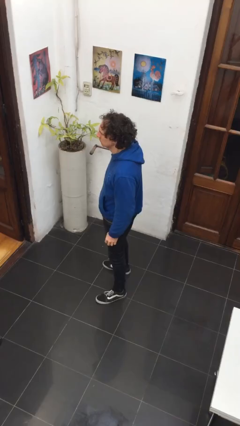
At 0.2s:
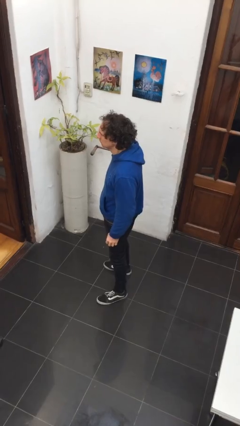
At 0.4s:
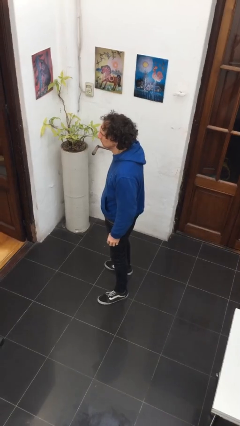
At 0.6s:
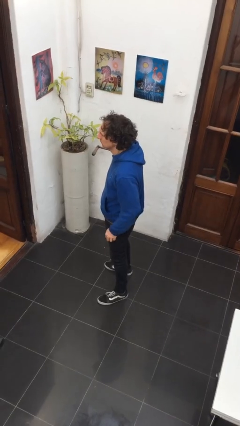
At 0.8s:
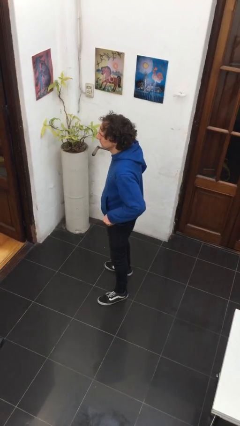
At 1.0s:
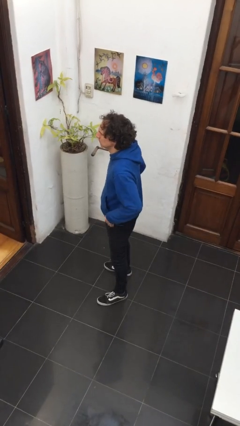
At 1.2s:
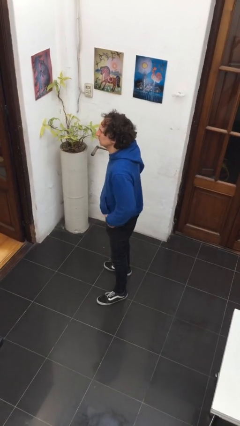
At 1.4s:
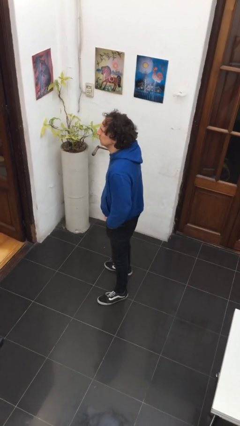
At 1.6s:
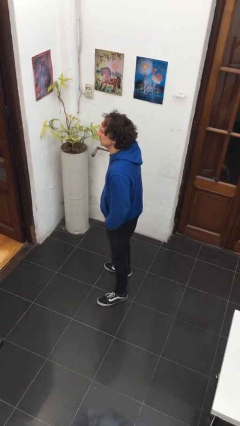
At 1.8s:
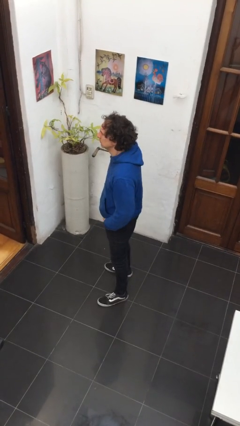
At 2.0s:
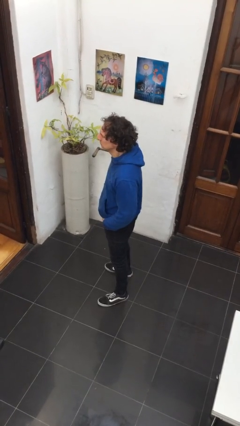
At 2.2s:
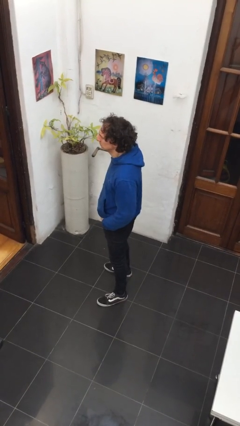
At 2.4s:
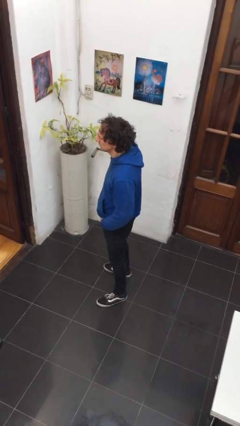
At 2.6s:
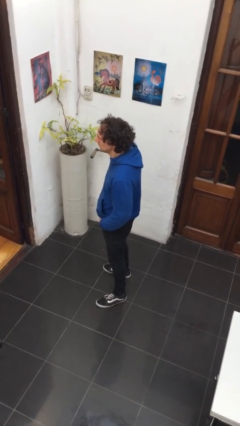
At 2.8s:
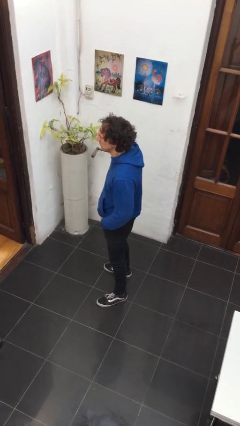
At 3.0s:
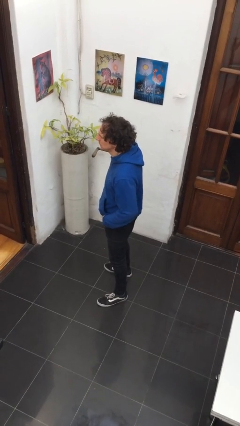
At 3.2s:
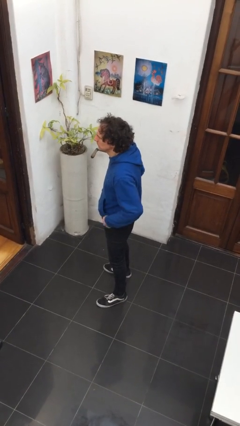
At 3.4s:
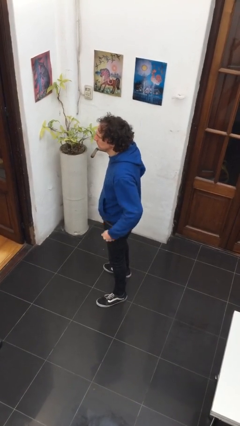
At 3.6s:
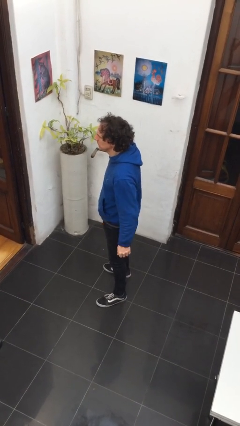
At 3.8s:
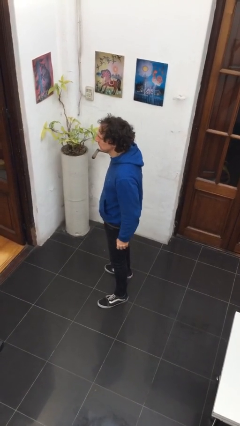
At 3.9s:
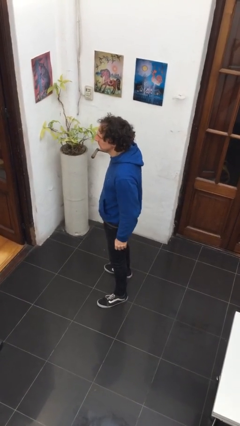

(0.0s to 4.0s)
person puts hands in back pockets

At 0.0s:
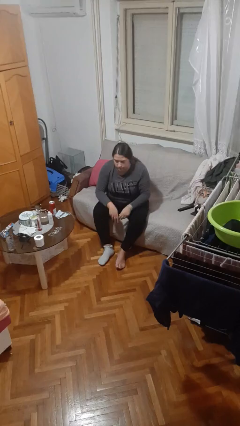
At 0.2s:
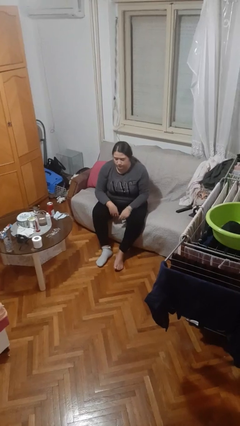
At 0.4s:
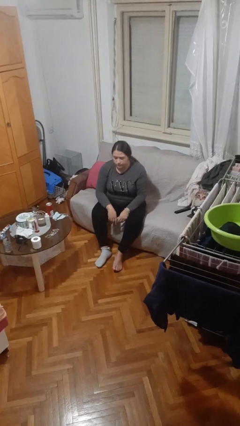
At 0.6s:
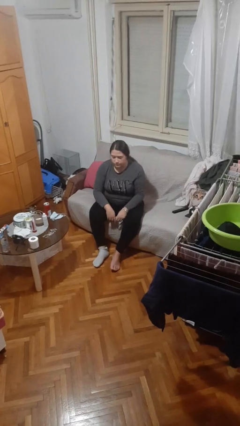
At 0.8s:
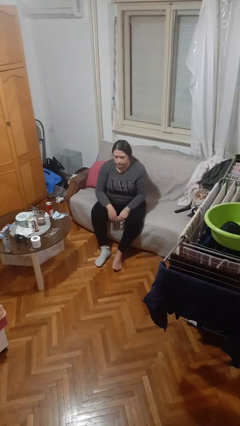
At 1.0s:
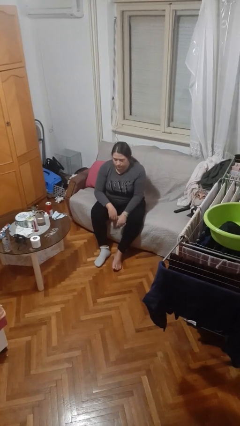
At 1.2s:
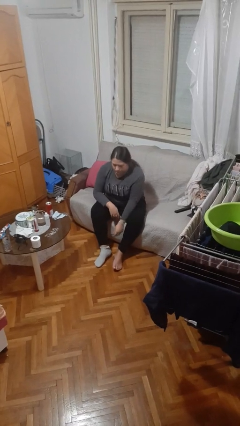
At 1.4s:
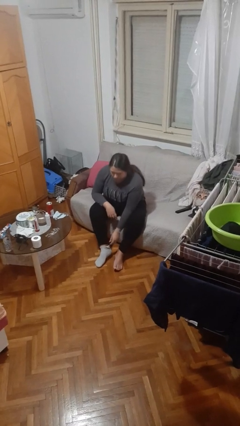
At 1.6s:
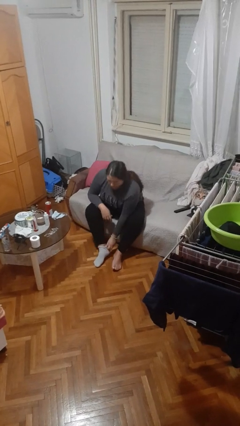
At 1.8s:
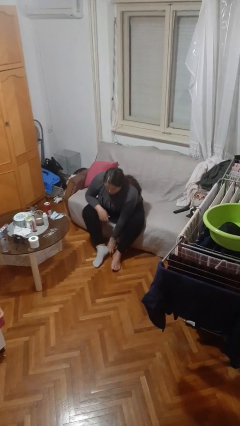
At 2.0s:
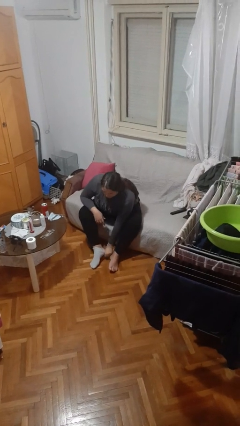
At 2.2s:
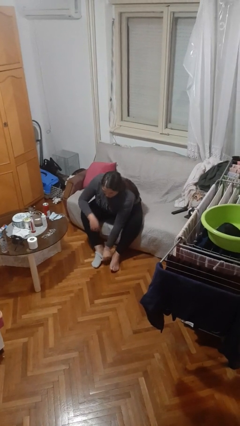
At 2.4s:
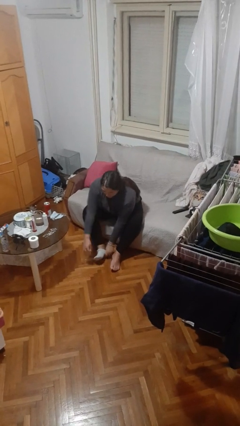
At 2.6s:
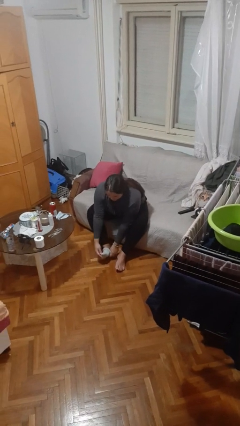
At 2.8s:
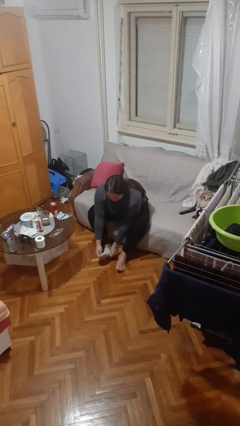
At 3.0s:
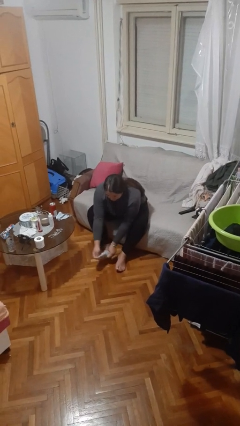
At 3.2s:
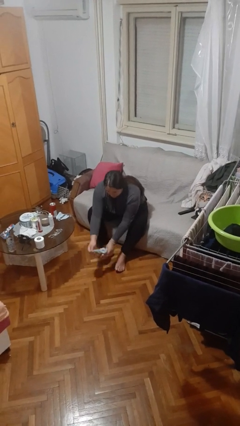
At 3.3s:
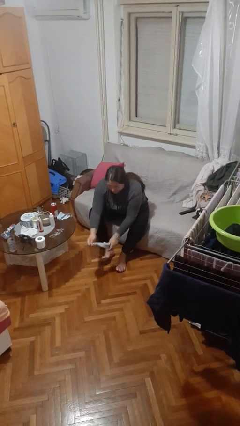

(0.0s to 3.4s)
person takes off socks

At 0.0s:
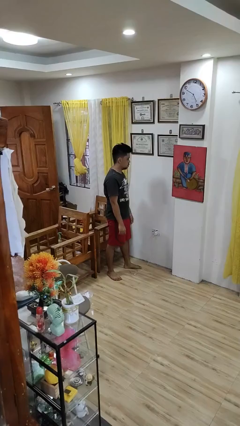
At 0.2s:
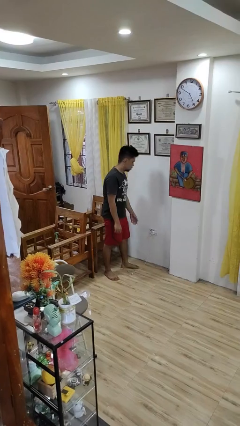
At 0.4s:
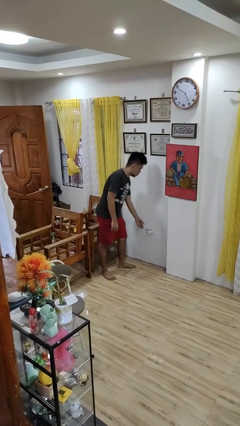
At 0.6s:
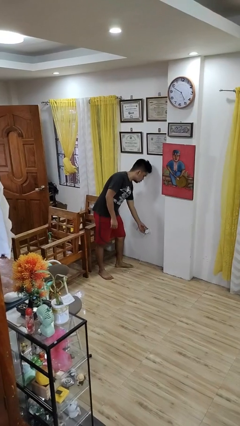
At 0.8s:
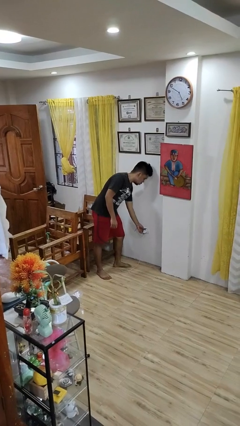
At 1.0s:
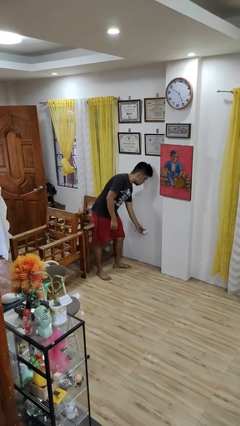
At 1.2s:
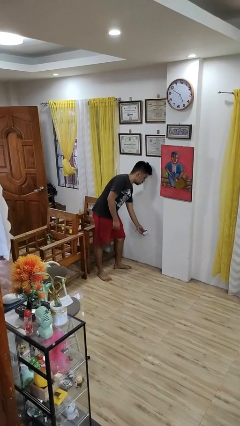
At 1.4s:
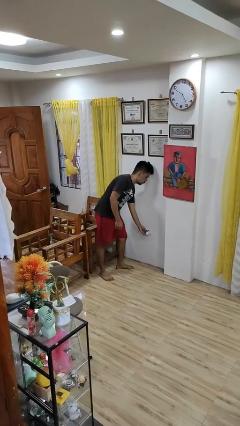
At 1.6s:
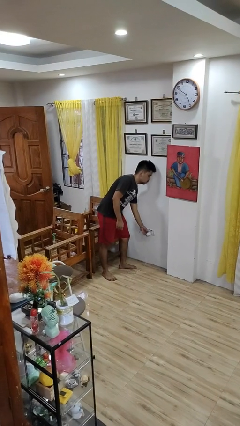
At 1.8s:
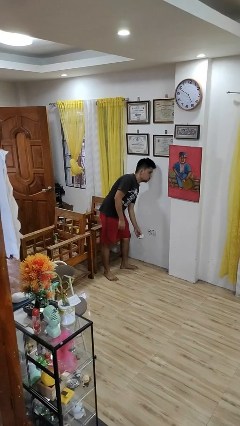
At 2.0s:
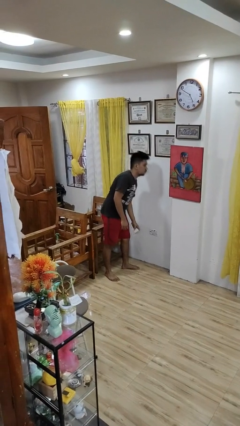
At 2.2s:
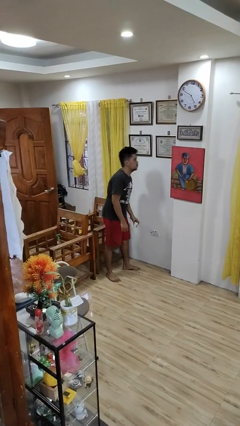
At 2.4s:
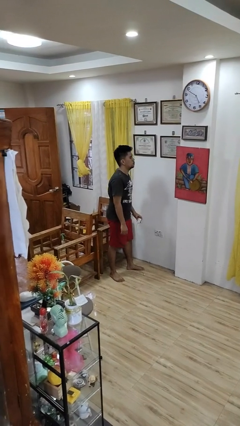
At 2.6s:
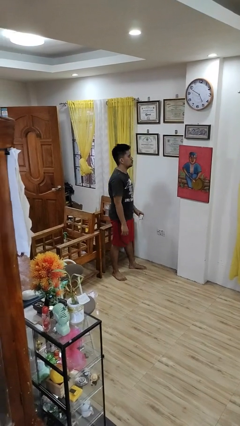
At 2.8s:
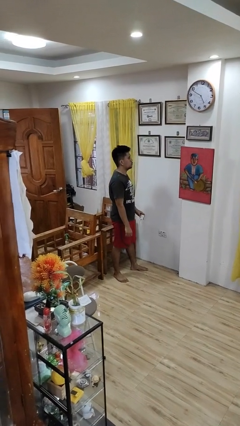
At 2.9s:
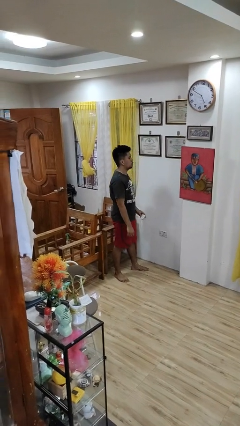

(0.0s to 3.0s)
person unplugs from electrical socket

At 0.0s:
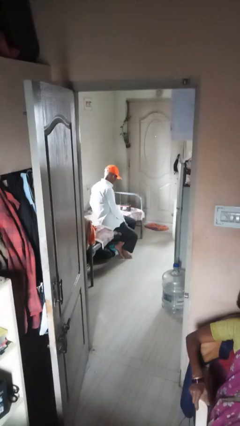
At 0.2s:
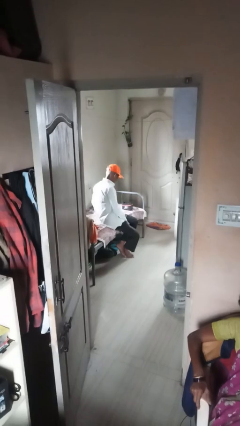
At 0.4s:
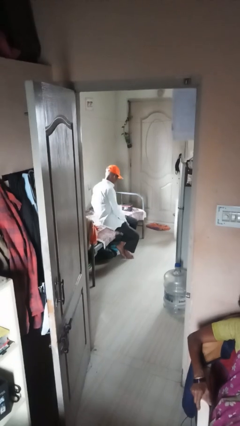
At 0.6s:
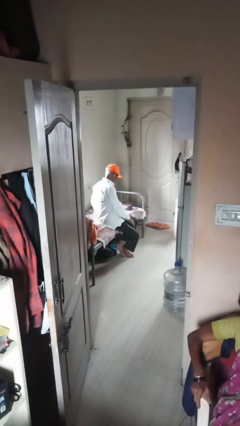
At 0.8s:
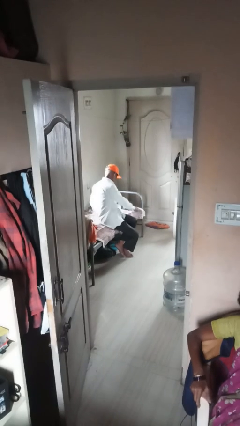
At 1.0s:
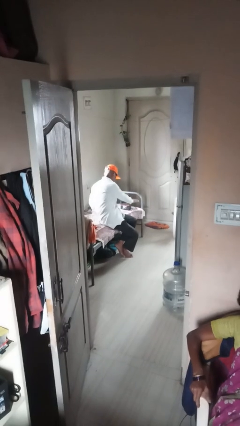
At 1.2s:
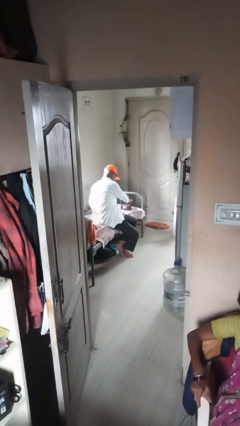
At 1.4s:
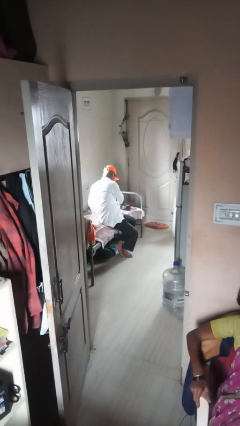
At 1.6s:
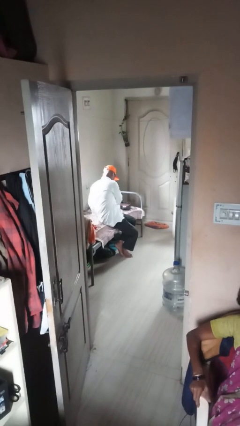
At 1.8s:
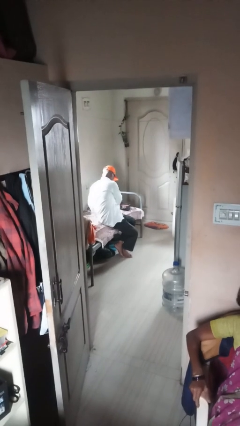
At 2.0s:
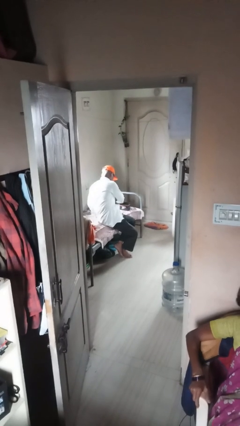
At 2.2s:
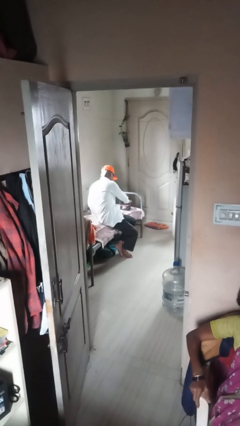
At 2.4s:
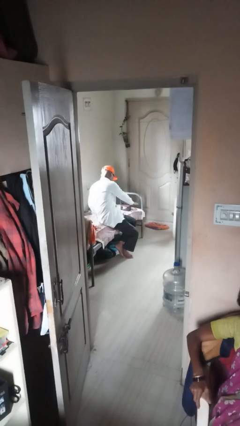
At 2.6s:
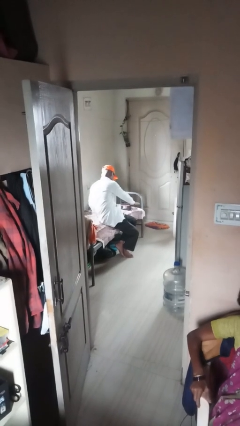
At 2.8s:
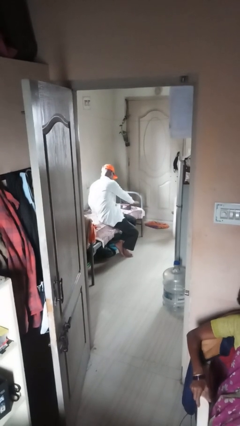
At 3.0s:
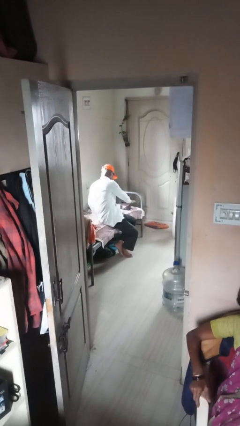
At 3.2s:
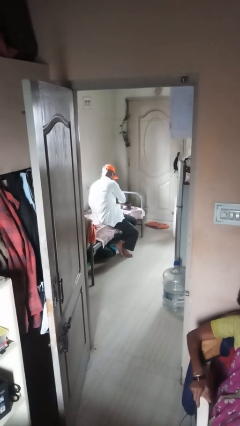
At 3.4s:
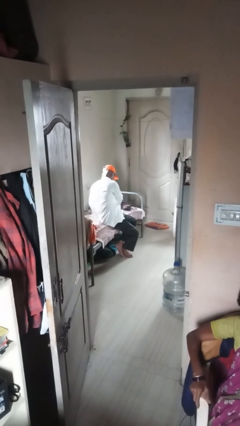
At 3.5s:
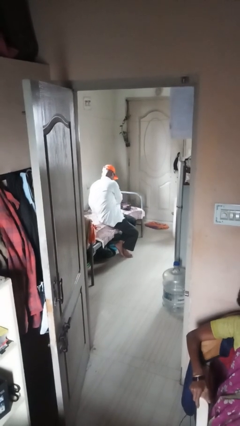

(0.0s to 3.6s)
person waves hand over object

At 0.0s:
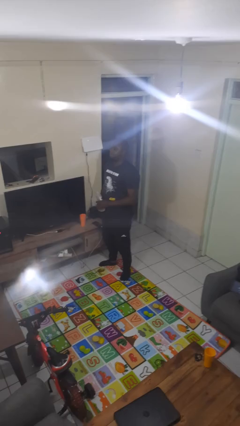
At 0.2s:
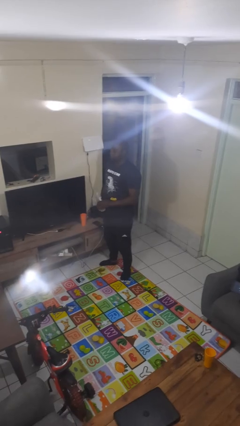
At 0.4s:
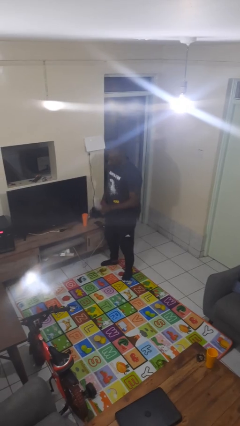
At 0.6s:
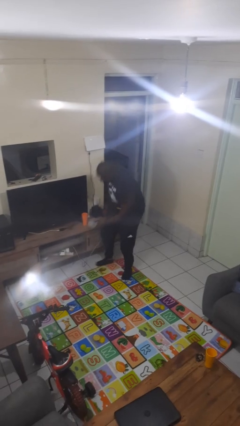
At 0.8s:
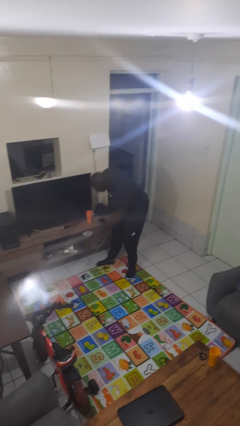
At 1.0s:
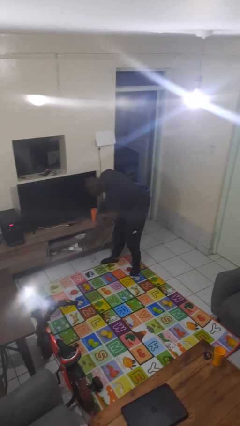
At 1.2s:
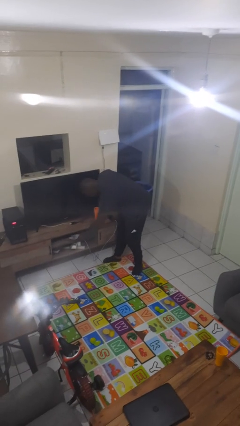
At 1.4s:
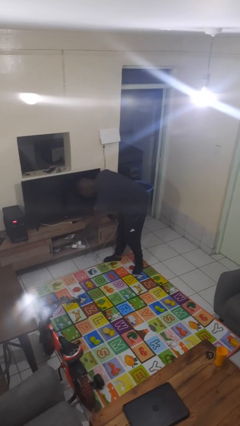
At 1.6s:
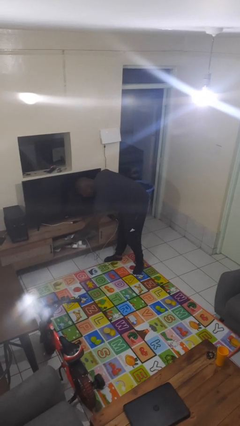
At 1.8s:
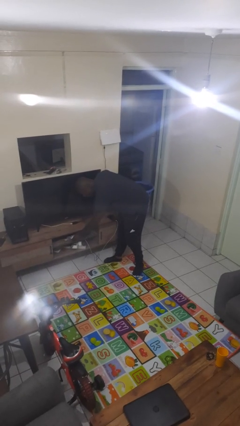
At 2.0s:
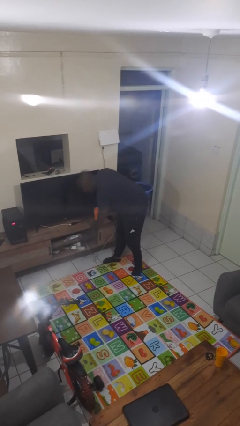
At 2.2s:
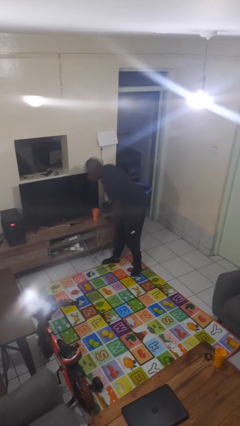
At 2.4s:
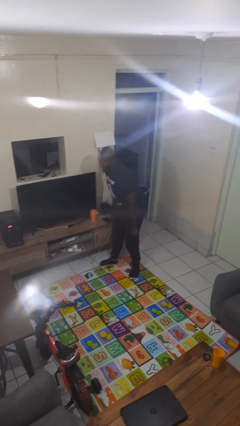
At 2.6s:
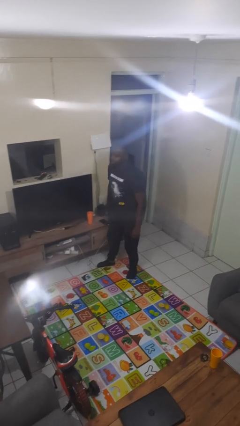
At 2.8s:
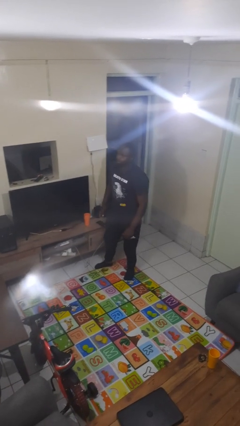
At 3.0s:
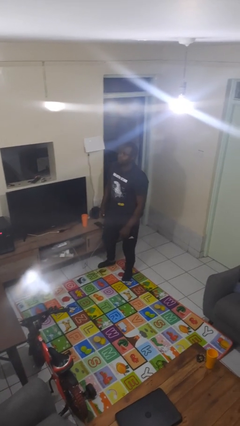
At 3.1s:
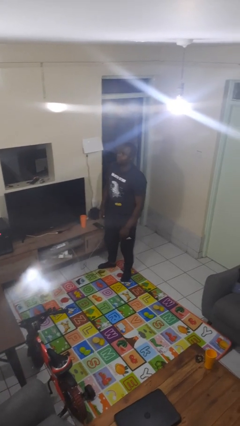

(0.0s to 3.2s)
person puts down object into cabinet

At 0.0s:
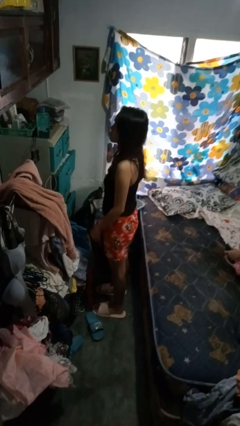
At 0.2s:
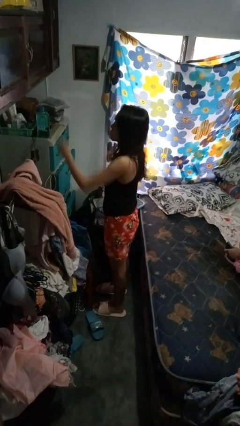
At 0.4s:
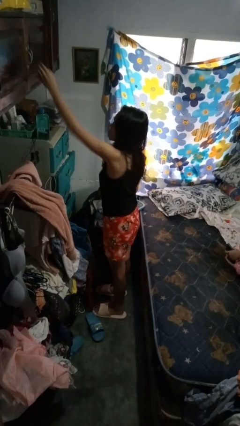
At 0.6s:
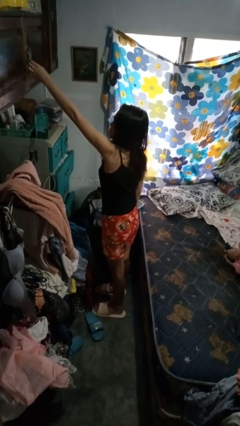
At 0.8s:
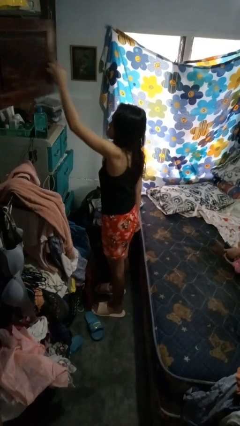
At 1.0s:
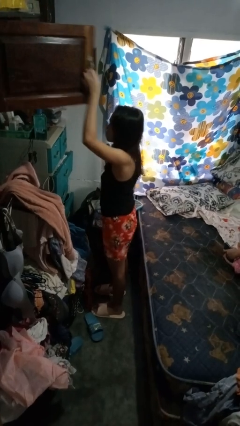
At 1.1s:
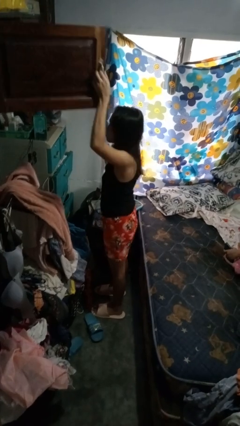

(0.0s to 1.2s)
person opens closet door
